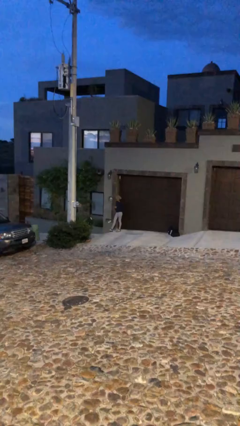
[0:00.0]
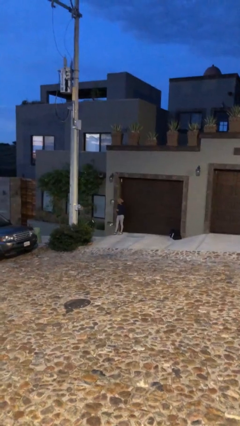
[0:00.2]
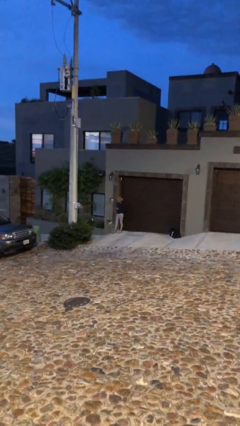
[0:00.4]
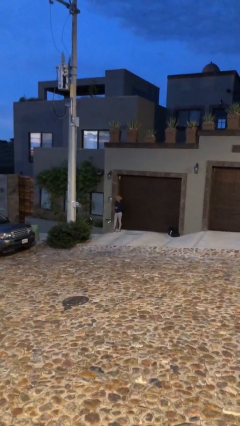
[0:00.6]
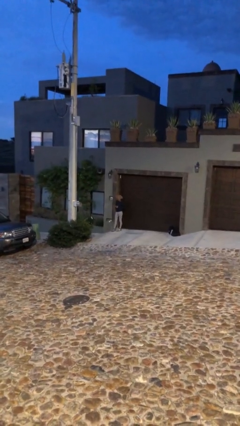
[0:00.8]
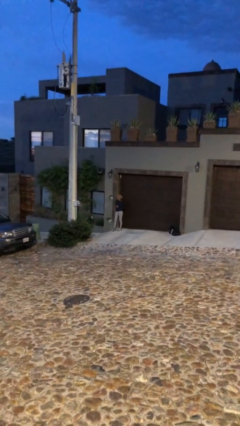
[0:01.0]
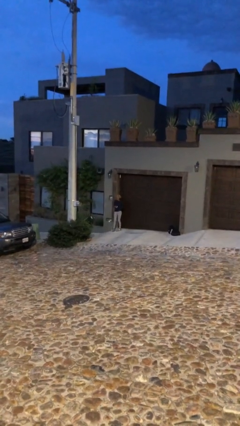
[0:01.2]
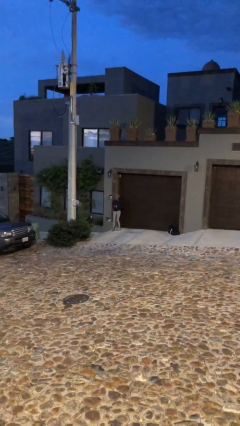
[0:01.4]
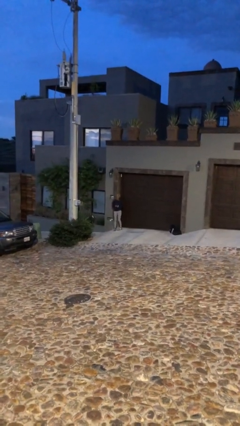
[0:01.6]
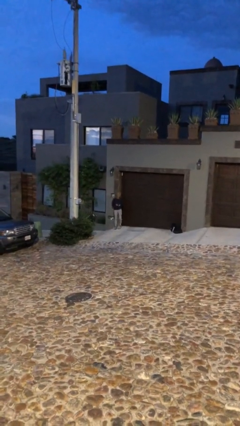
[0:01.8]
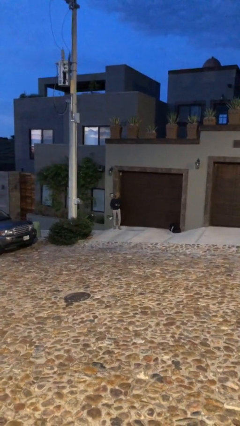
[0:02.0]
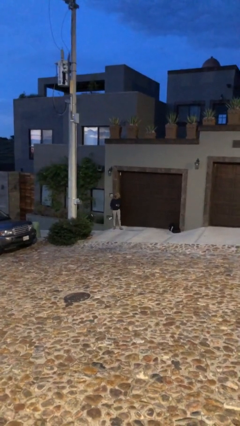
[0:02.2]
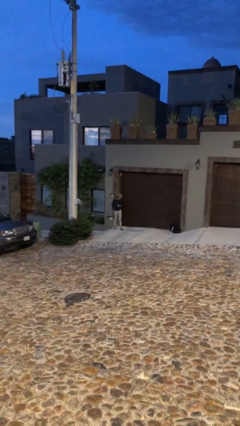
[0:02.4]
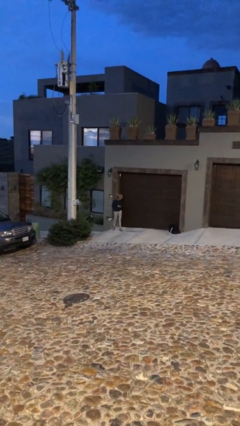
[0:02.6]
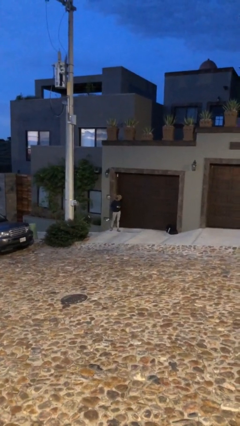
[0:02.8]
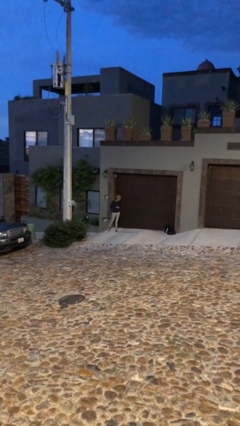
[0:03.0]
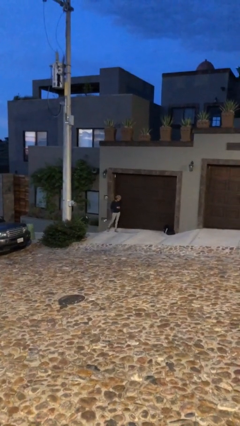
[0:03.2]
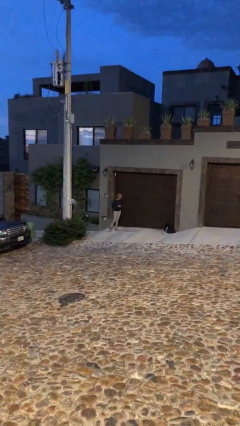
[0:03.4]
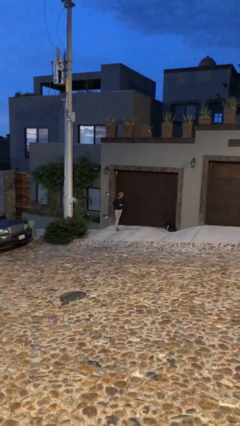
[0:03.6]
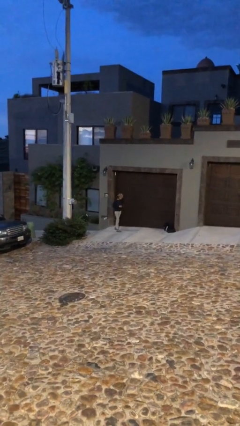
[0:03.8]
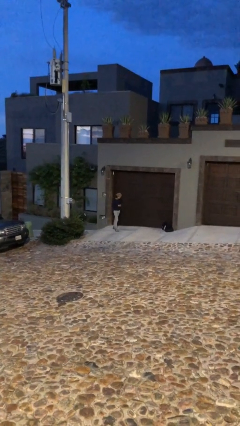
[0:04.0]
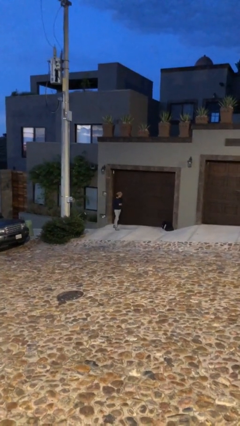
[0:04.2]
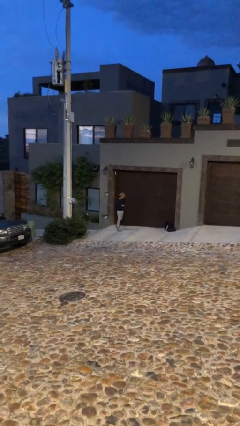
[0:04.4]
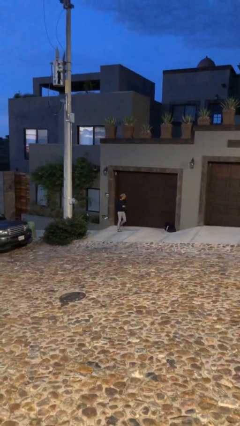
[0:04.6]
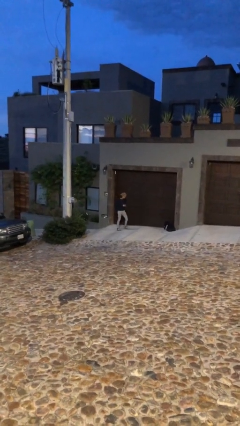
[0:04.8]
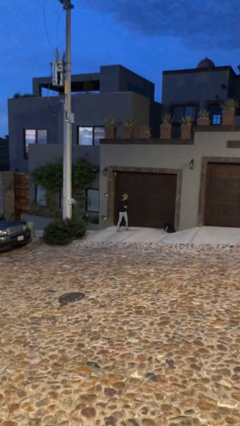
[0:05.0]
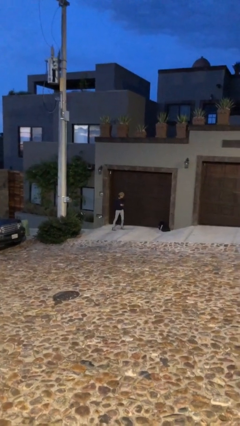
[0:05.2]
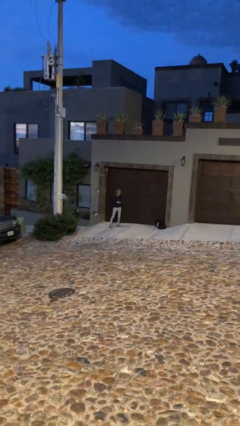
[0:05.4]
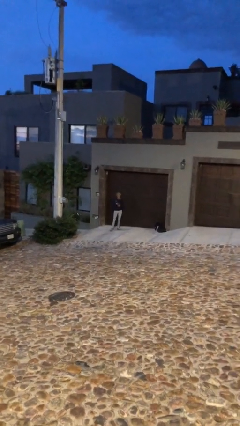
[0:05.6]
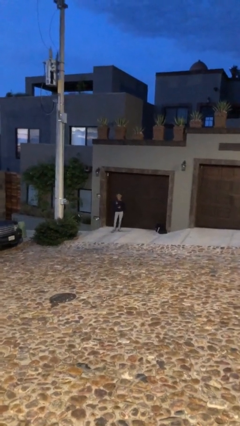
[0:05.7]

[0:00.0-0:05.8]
person texts on phone

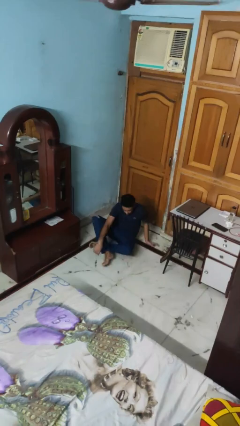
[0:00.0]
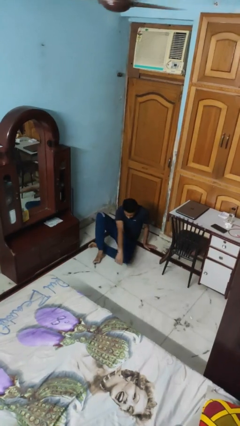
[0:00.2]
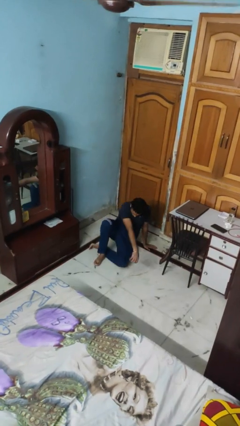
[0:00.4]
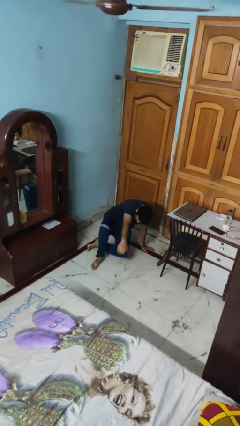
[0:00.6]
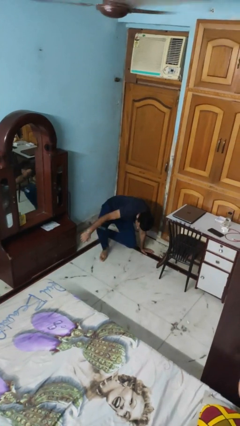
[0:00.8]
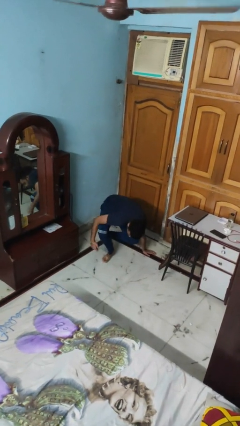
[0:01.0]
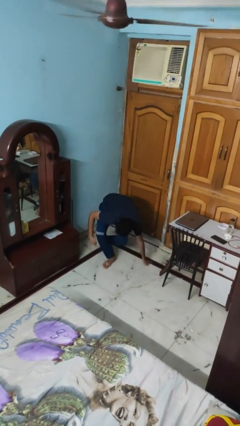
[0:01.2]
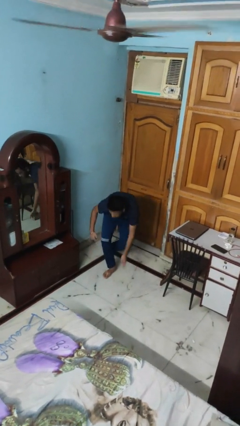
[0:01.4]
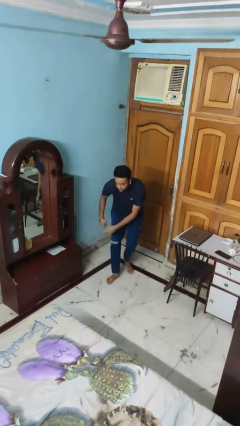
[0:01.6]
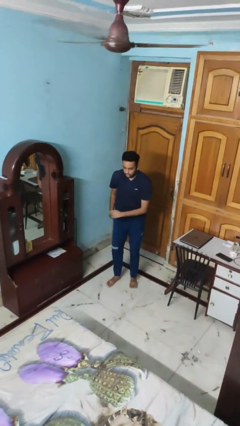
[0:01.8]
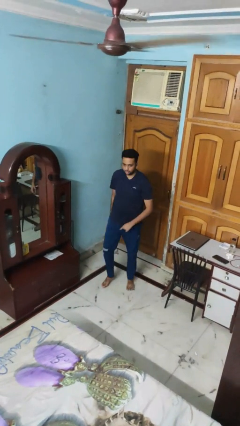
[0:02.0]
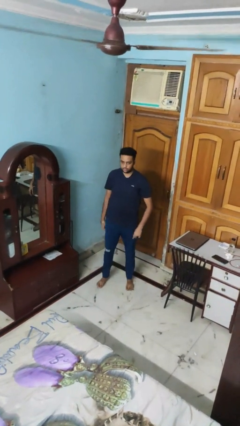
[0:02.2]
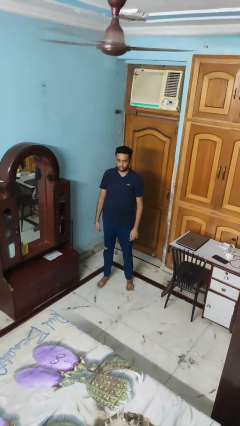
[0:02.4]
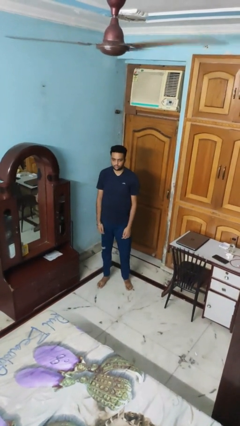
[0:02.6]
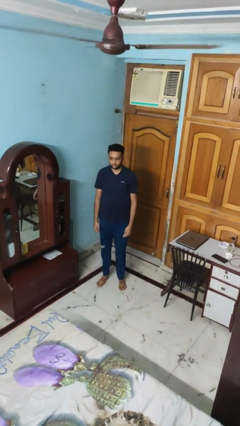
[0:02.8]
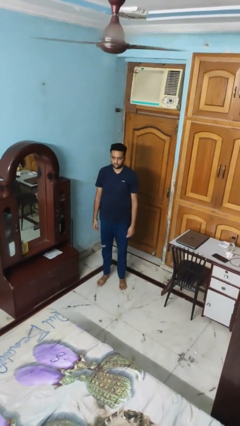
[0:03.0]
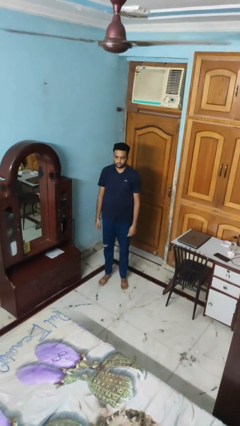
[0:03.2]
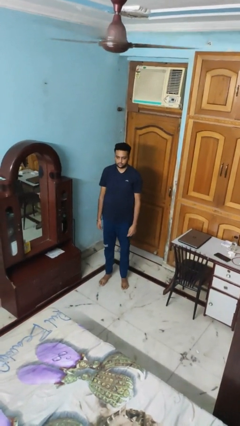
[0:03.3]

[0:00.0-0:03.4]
person stands up from floor

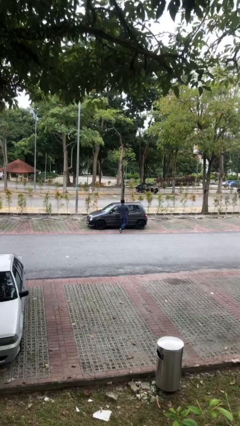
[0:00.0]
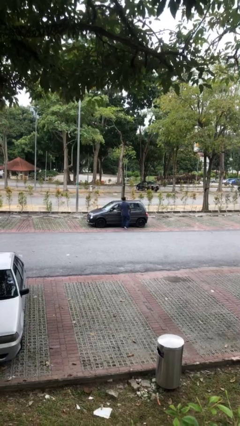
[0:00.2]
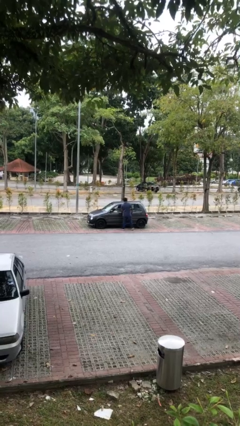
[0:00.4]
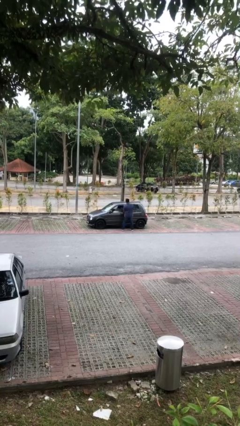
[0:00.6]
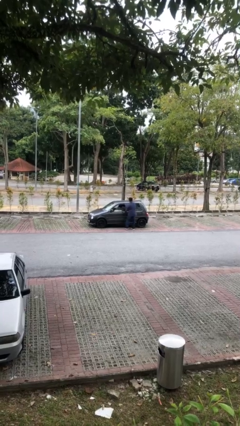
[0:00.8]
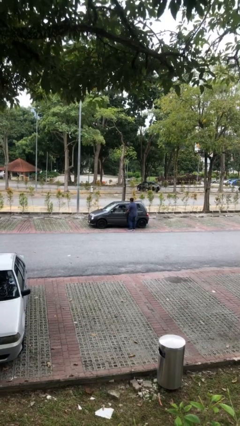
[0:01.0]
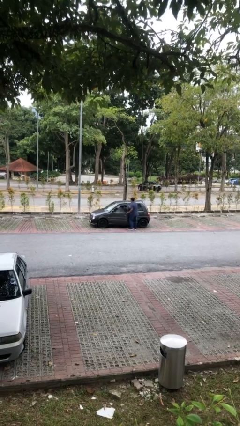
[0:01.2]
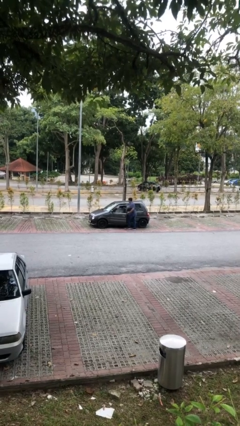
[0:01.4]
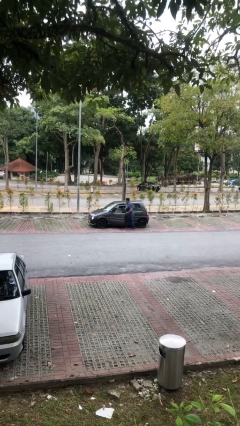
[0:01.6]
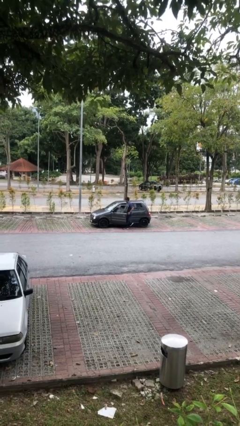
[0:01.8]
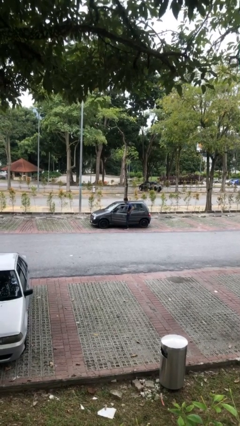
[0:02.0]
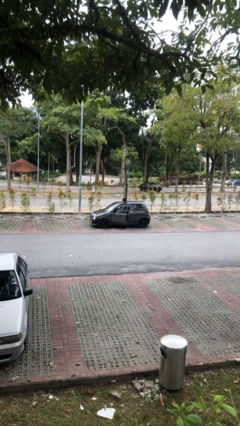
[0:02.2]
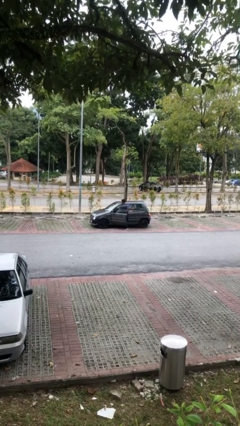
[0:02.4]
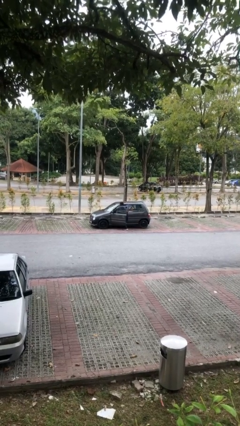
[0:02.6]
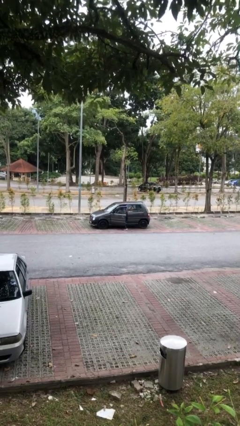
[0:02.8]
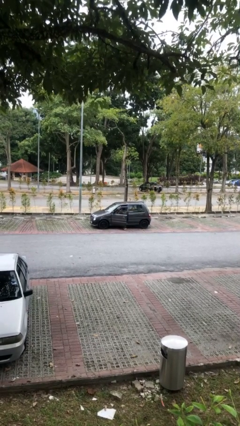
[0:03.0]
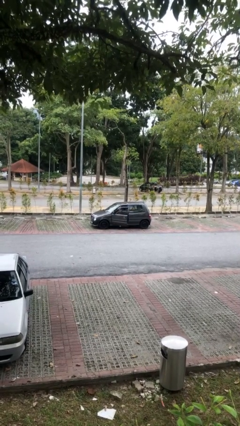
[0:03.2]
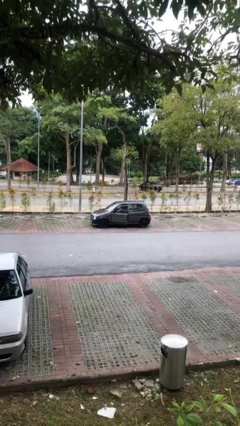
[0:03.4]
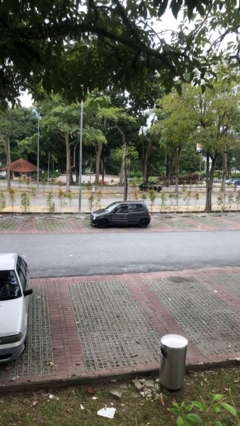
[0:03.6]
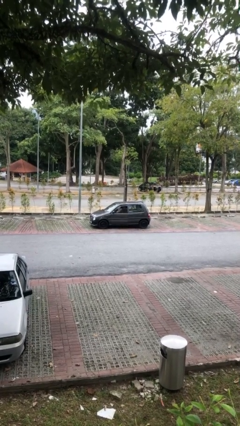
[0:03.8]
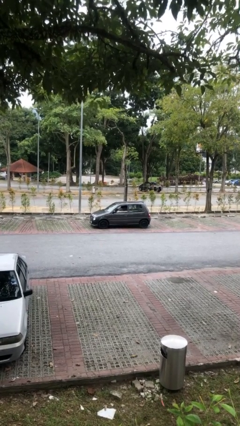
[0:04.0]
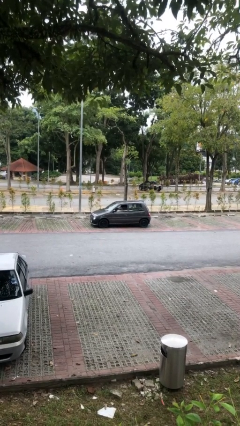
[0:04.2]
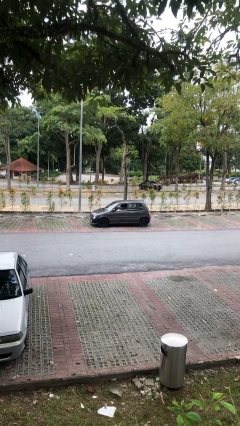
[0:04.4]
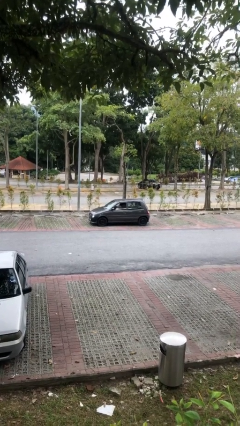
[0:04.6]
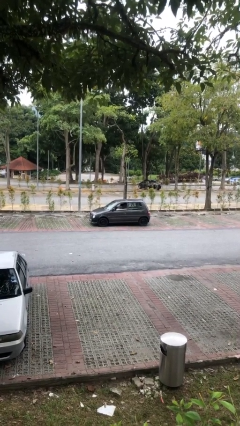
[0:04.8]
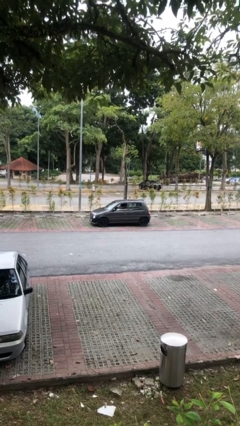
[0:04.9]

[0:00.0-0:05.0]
car picks up person

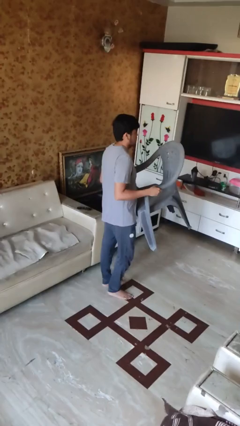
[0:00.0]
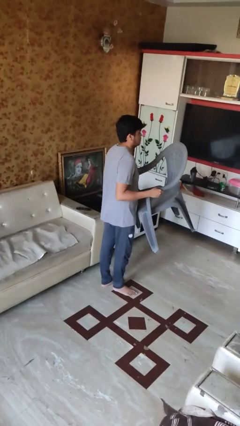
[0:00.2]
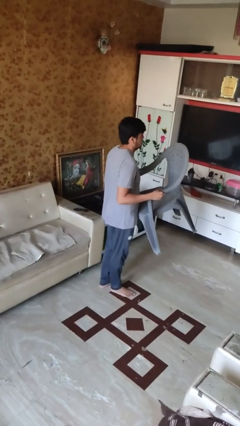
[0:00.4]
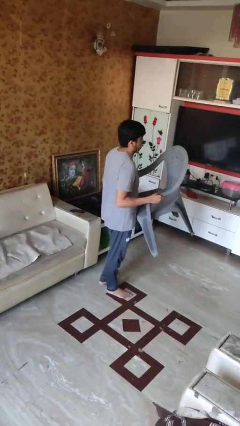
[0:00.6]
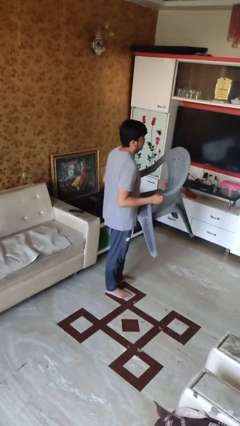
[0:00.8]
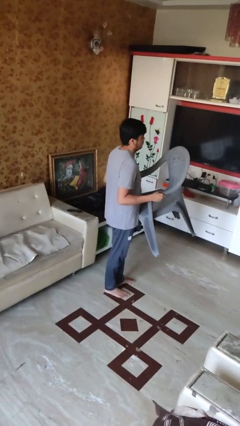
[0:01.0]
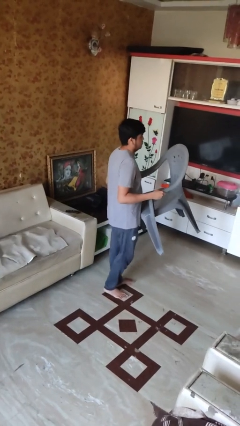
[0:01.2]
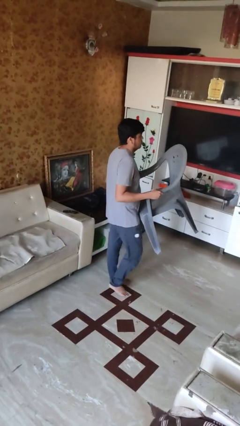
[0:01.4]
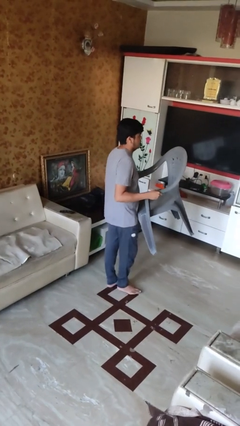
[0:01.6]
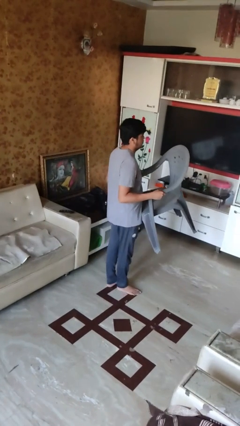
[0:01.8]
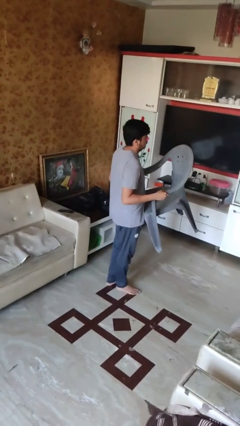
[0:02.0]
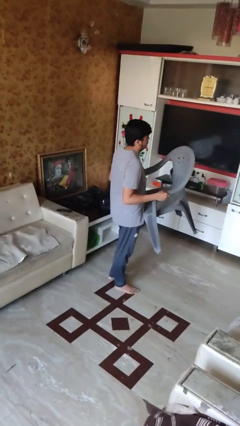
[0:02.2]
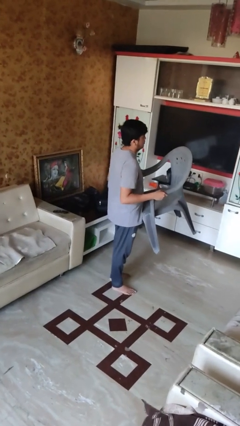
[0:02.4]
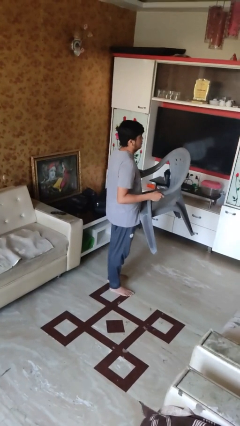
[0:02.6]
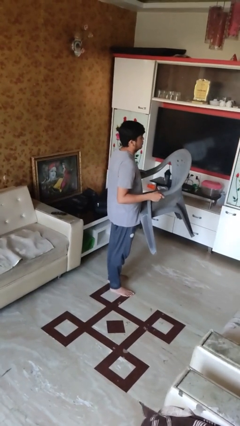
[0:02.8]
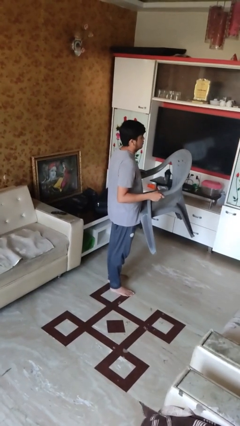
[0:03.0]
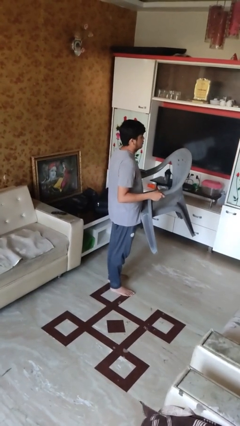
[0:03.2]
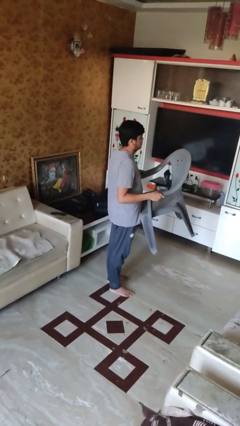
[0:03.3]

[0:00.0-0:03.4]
person carries furniture
